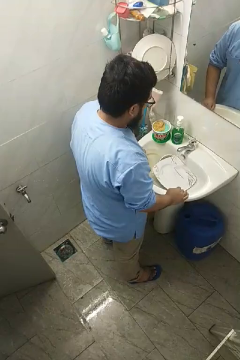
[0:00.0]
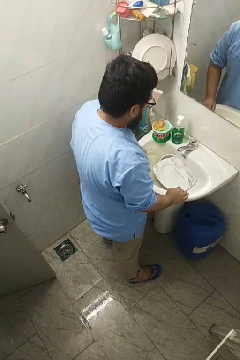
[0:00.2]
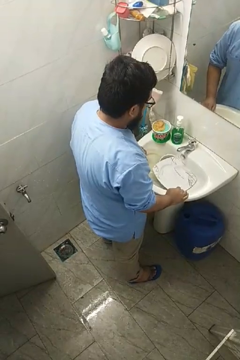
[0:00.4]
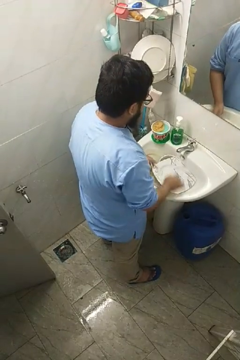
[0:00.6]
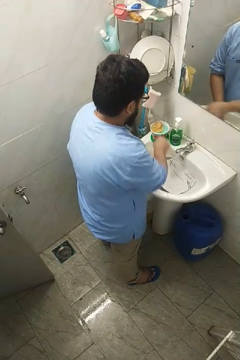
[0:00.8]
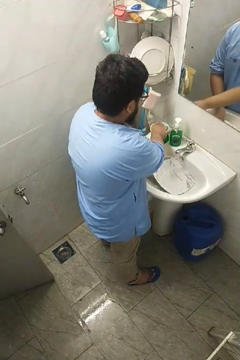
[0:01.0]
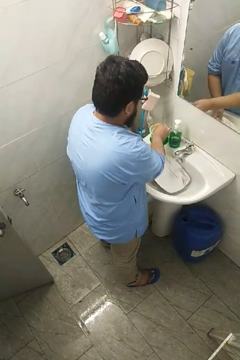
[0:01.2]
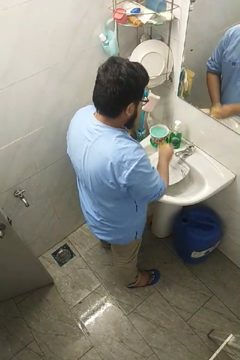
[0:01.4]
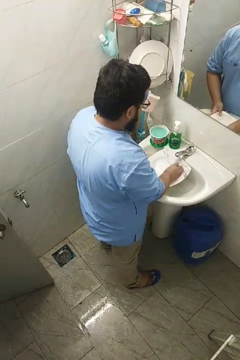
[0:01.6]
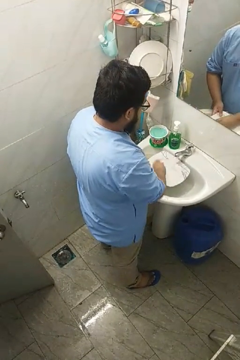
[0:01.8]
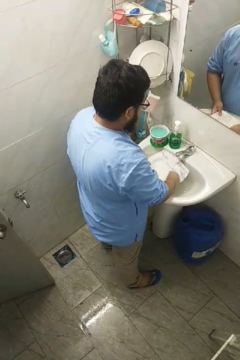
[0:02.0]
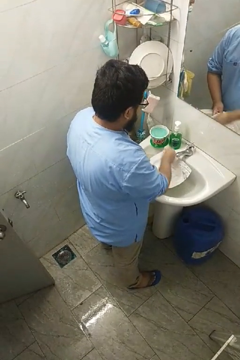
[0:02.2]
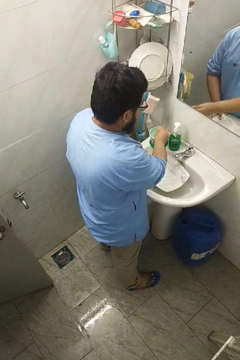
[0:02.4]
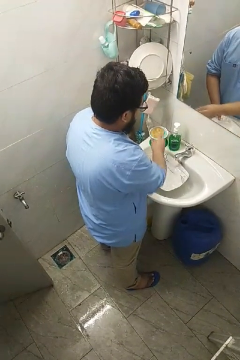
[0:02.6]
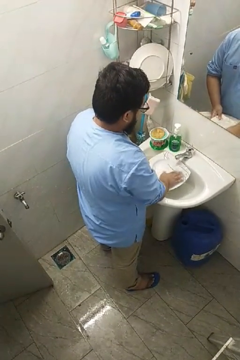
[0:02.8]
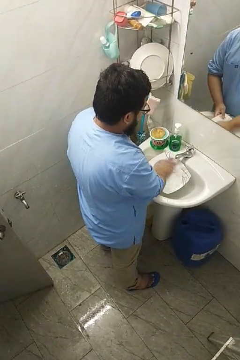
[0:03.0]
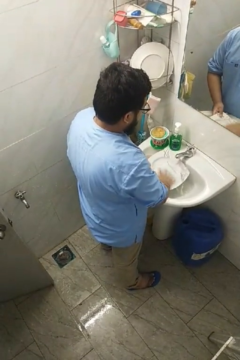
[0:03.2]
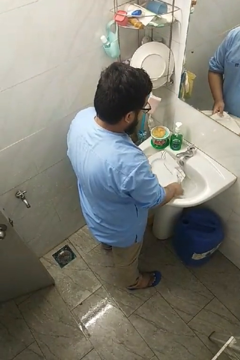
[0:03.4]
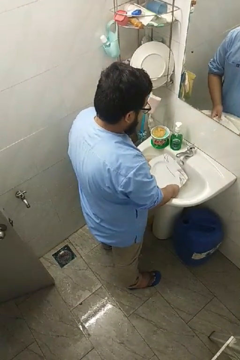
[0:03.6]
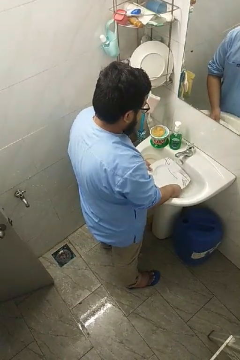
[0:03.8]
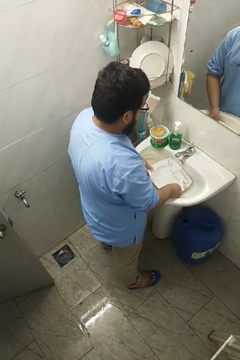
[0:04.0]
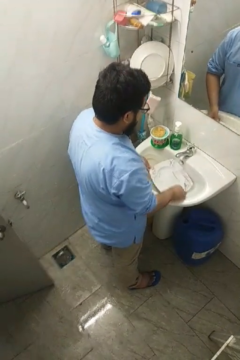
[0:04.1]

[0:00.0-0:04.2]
person washes dish

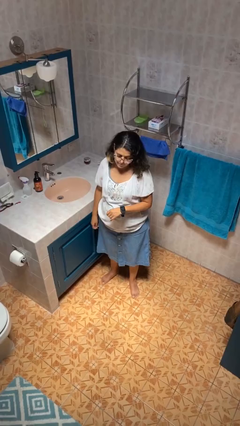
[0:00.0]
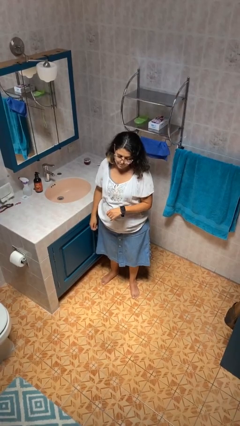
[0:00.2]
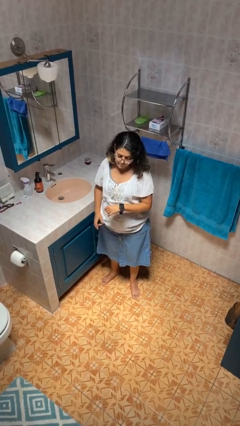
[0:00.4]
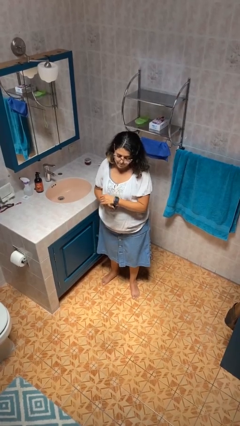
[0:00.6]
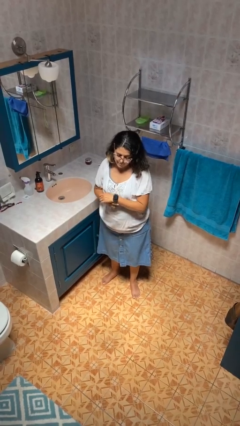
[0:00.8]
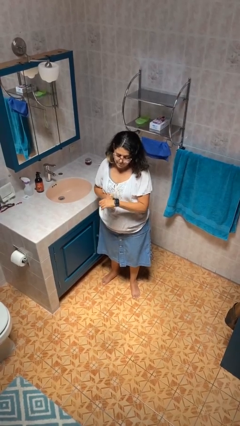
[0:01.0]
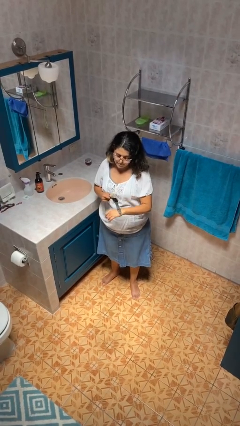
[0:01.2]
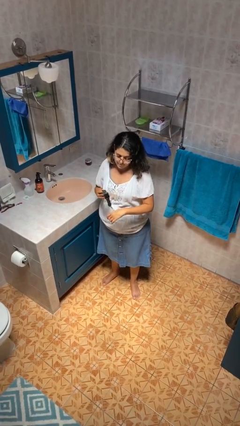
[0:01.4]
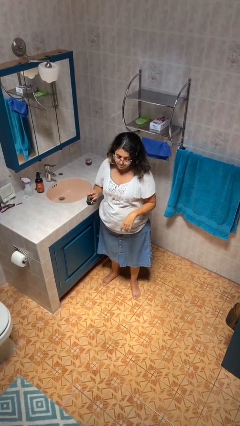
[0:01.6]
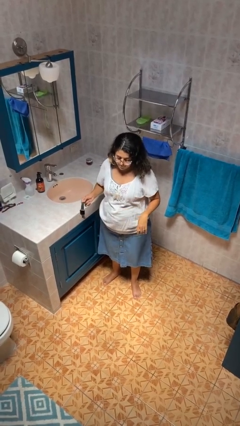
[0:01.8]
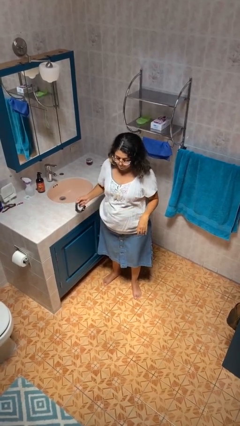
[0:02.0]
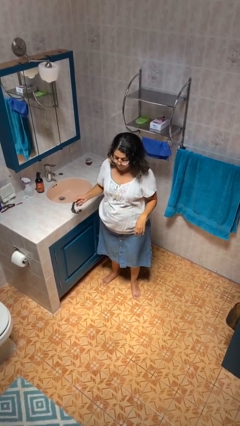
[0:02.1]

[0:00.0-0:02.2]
person takes off wristwatch

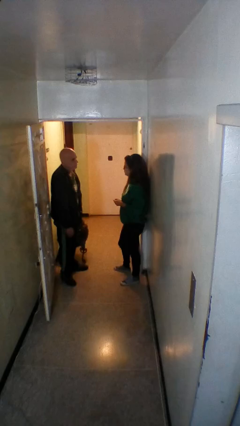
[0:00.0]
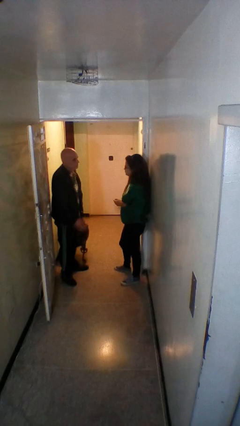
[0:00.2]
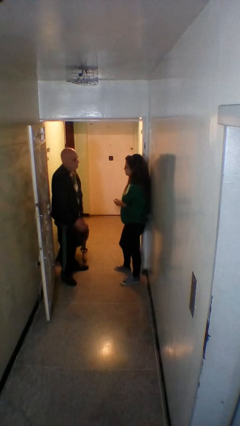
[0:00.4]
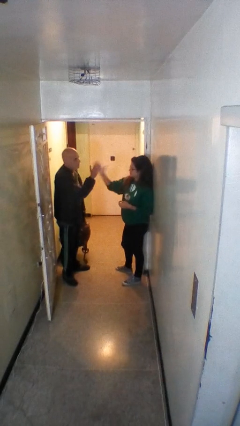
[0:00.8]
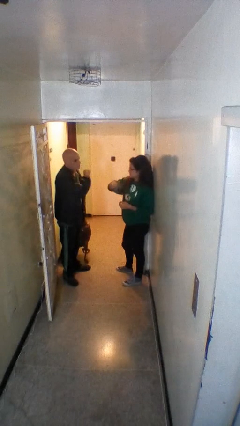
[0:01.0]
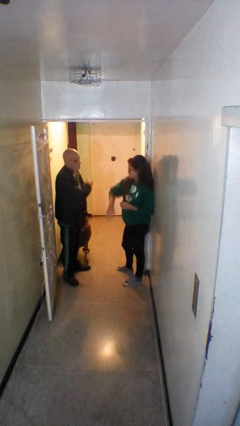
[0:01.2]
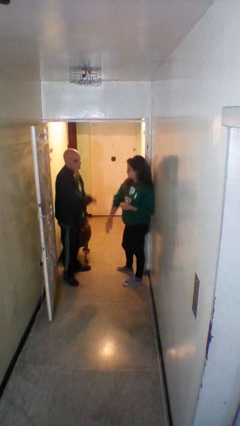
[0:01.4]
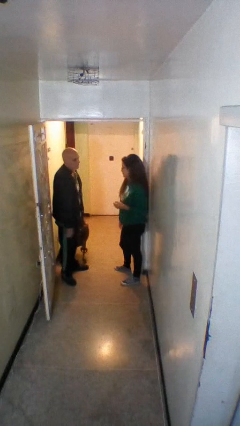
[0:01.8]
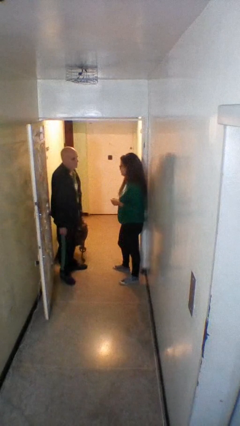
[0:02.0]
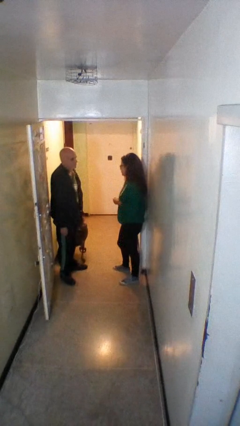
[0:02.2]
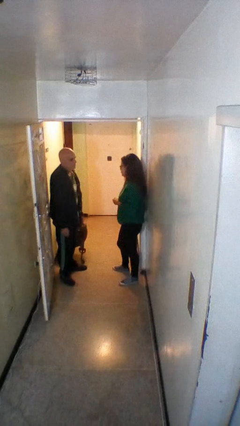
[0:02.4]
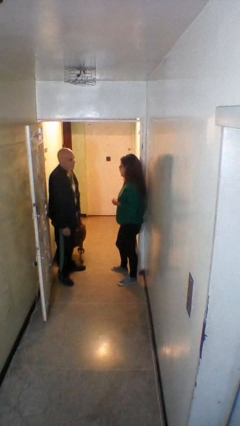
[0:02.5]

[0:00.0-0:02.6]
person highfives hand

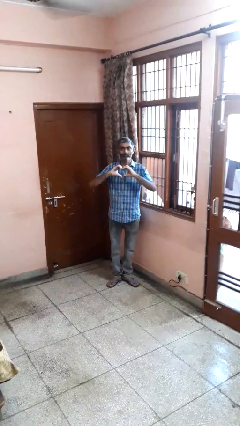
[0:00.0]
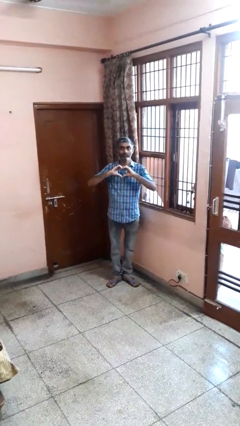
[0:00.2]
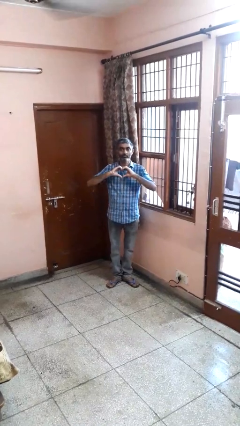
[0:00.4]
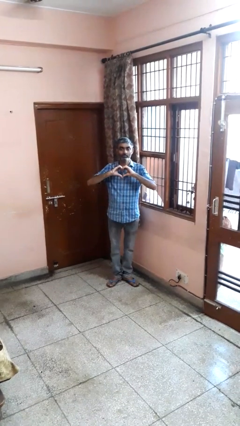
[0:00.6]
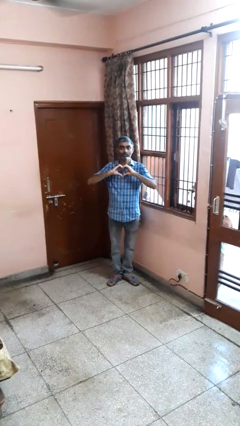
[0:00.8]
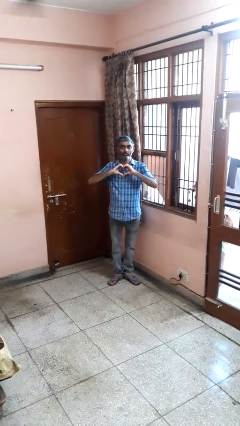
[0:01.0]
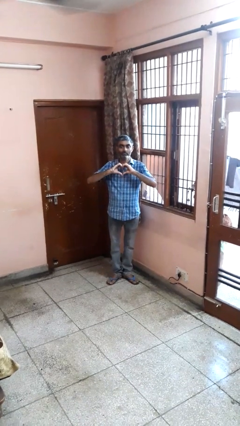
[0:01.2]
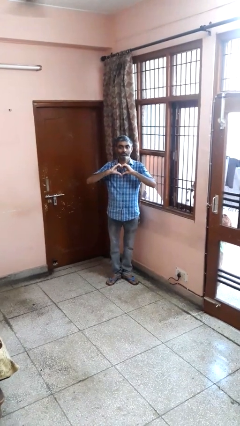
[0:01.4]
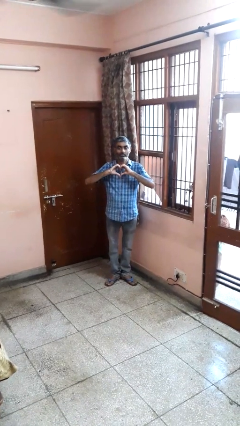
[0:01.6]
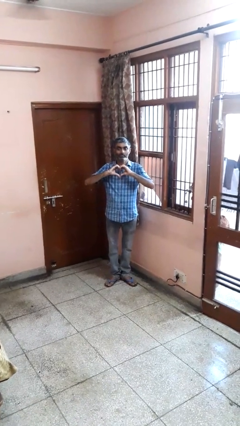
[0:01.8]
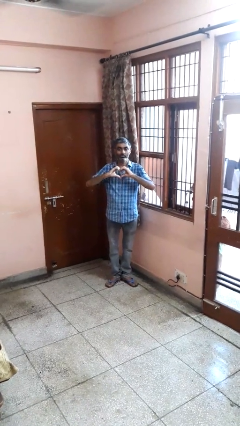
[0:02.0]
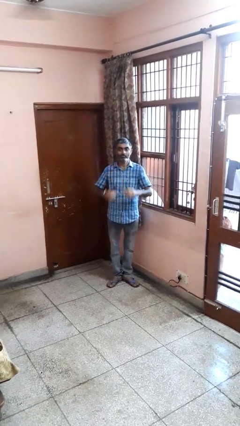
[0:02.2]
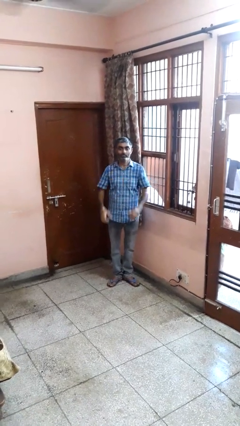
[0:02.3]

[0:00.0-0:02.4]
person gestures heart

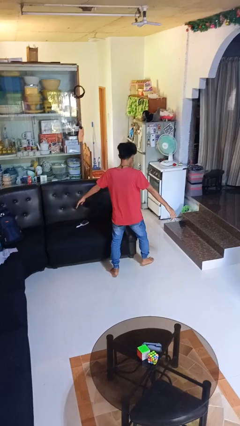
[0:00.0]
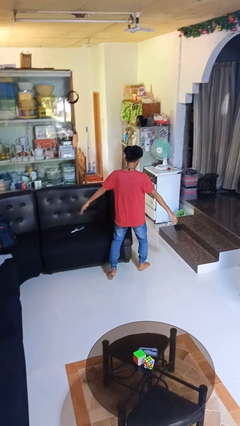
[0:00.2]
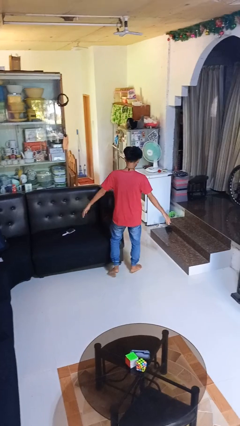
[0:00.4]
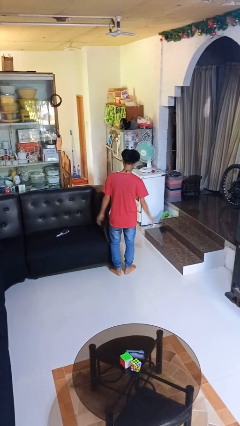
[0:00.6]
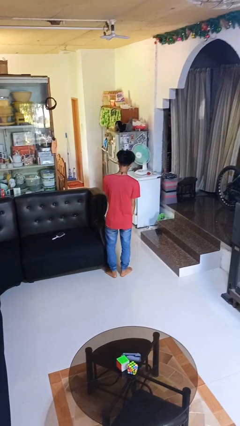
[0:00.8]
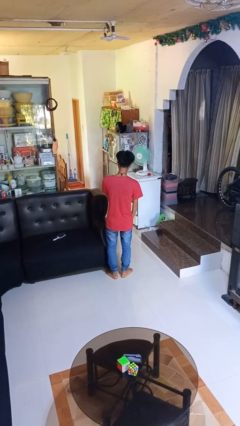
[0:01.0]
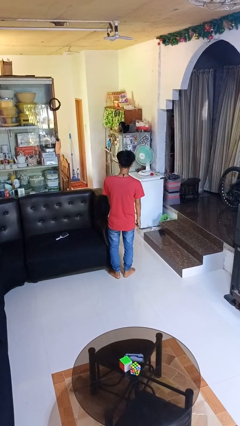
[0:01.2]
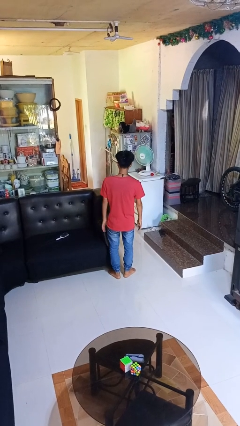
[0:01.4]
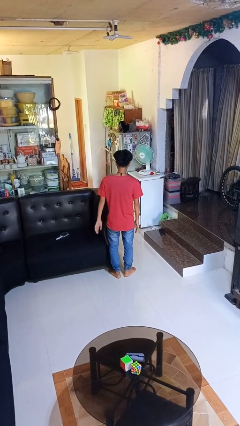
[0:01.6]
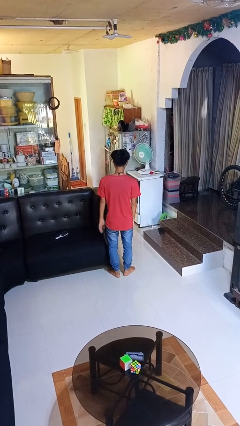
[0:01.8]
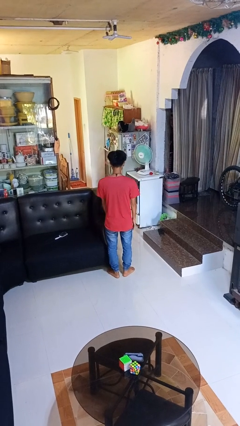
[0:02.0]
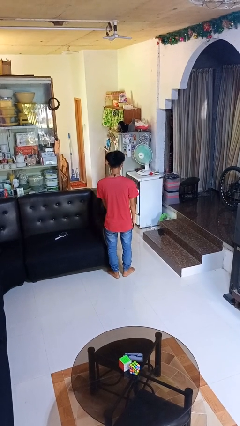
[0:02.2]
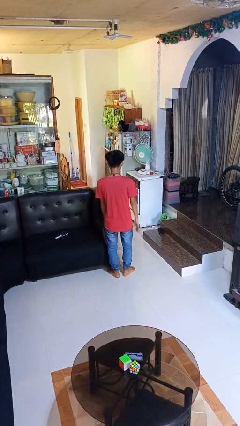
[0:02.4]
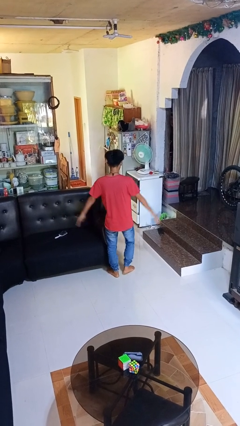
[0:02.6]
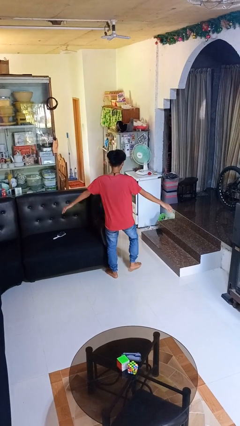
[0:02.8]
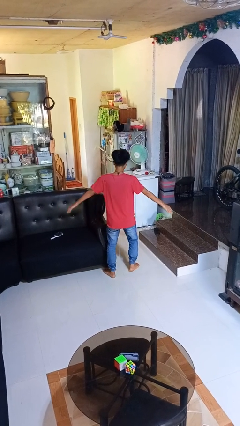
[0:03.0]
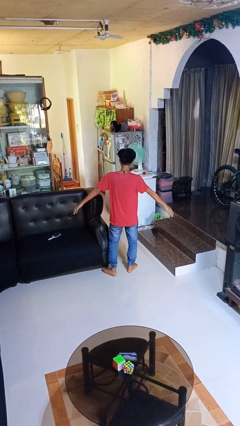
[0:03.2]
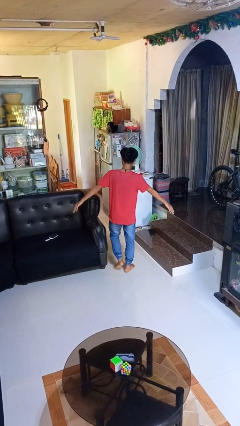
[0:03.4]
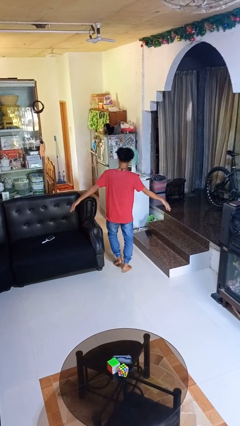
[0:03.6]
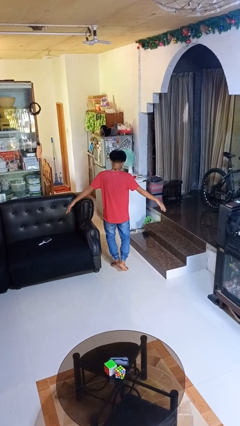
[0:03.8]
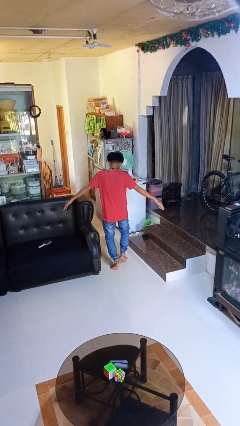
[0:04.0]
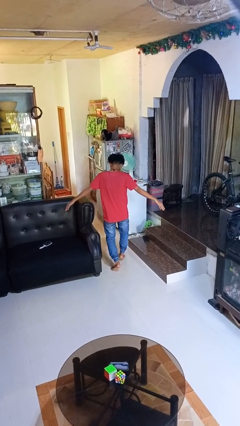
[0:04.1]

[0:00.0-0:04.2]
person picks up object from floor

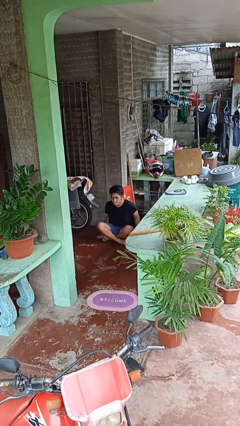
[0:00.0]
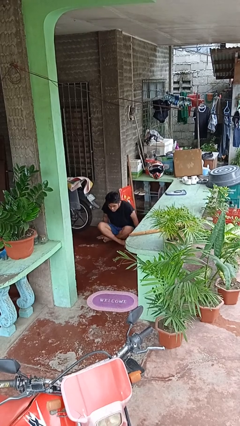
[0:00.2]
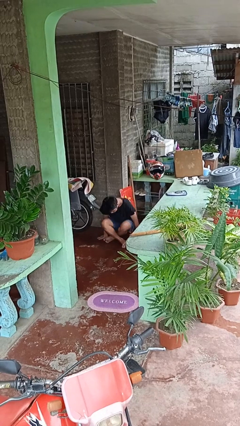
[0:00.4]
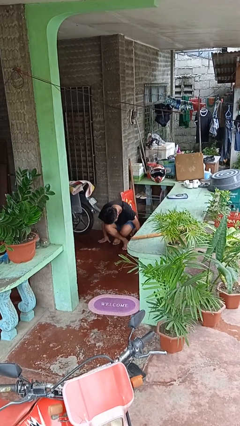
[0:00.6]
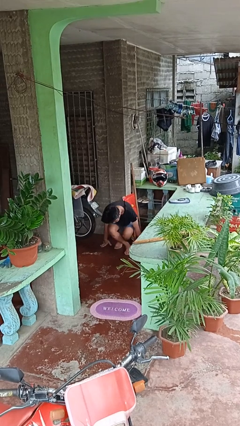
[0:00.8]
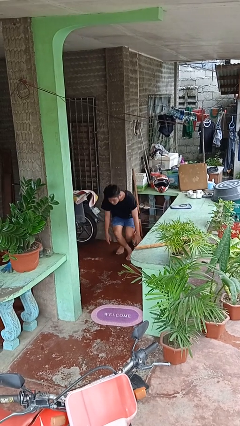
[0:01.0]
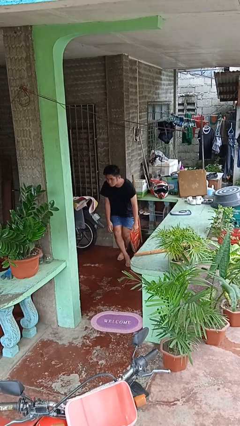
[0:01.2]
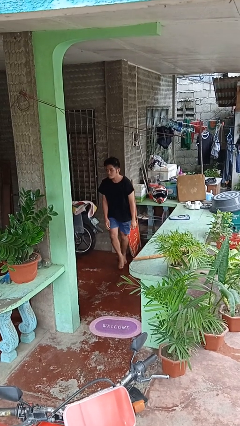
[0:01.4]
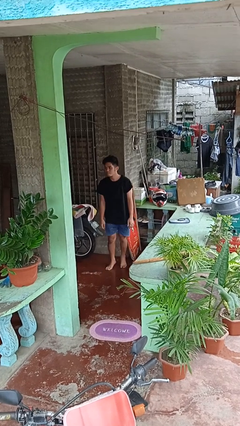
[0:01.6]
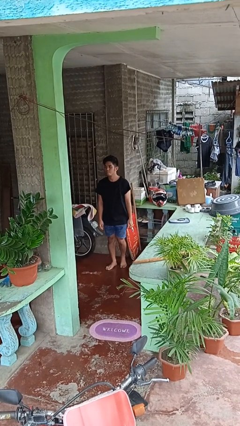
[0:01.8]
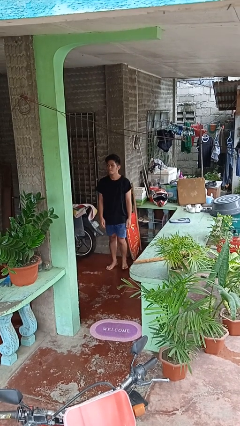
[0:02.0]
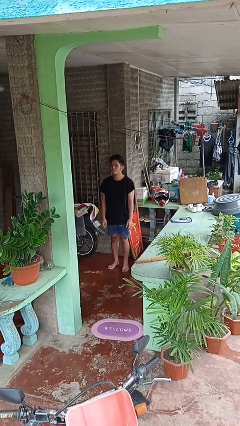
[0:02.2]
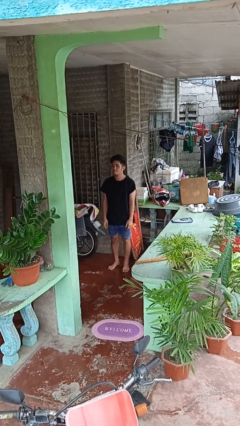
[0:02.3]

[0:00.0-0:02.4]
person stands up from floor

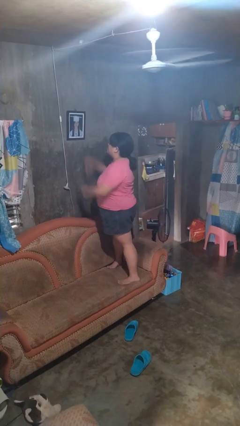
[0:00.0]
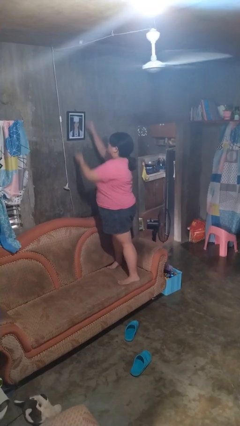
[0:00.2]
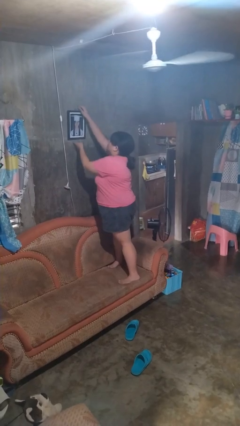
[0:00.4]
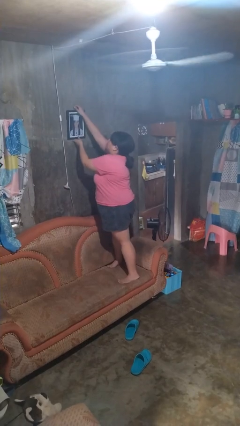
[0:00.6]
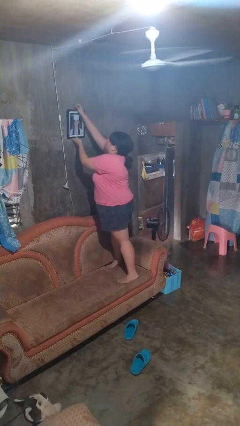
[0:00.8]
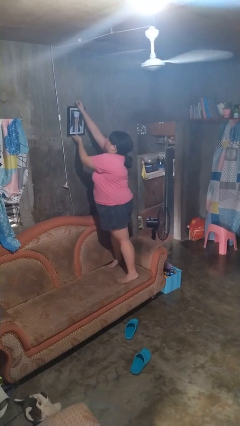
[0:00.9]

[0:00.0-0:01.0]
person takes down picture frame
